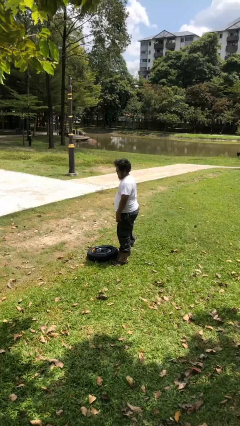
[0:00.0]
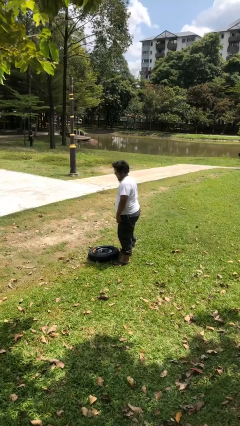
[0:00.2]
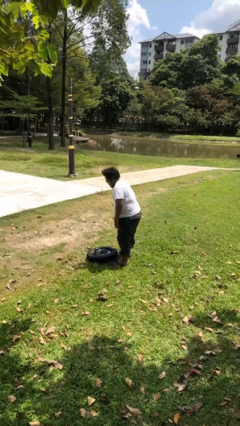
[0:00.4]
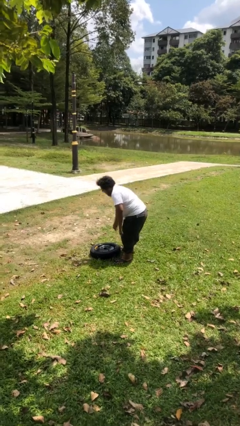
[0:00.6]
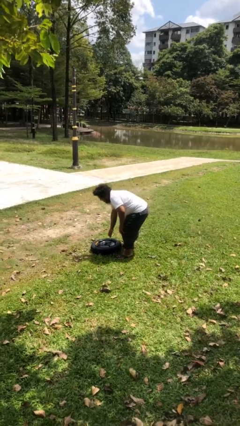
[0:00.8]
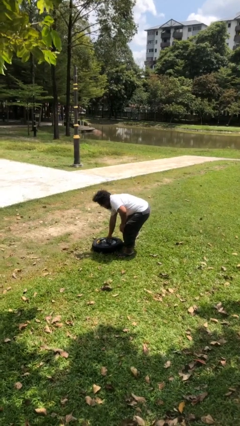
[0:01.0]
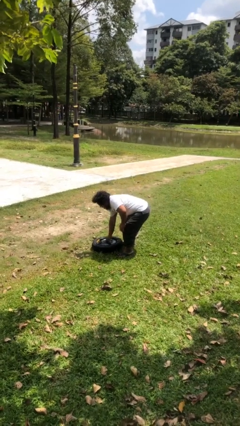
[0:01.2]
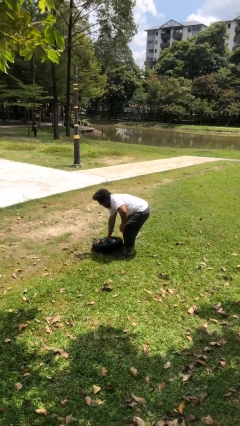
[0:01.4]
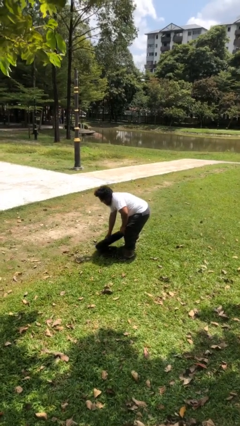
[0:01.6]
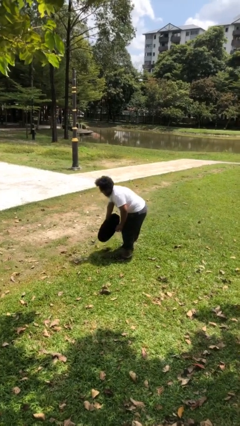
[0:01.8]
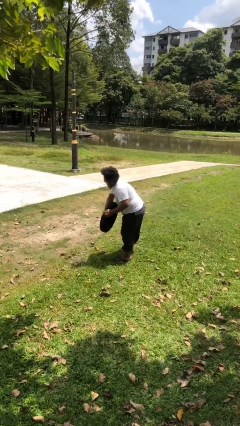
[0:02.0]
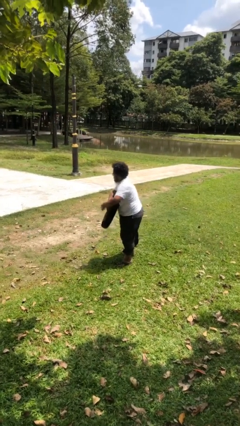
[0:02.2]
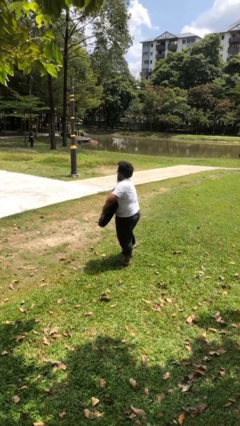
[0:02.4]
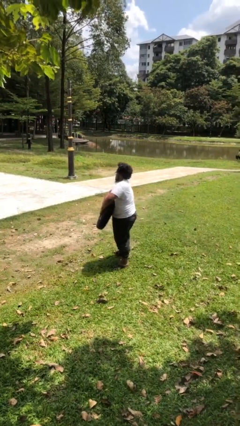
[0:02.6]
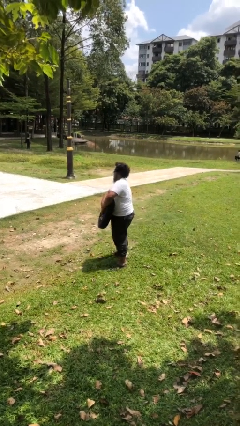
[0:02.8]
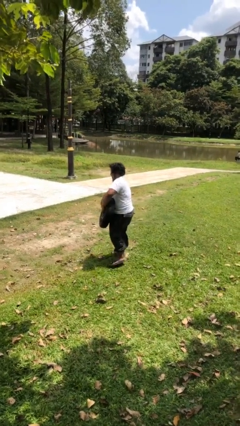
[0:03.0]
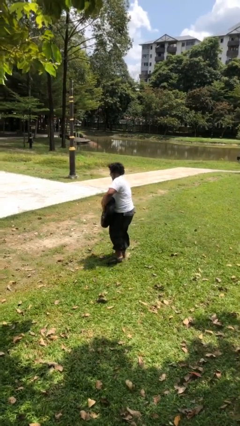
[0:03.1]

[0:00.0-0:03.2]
person picks up object from floor

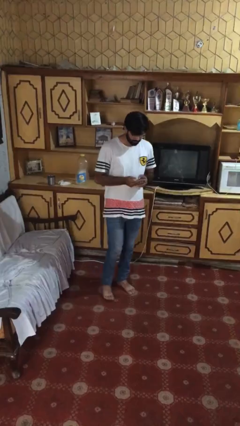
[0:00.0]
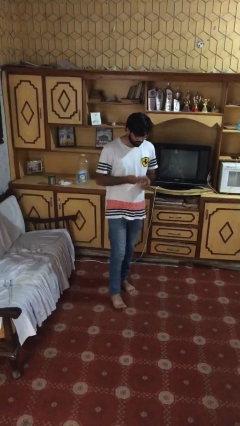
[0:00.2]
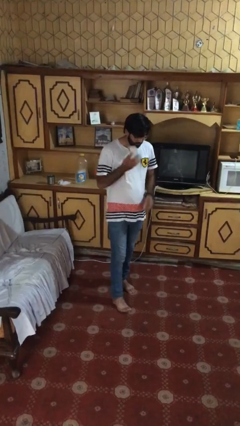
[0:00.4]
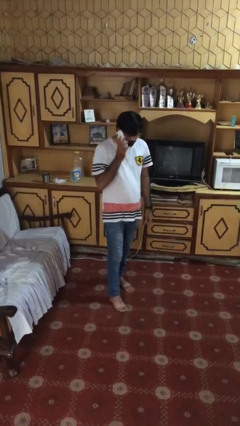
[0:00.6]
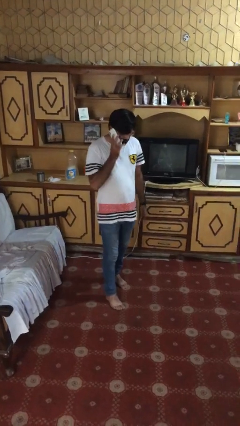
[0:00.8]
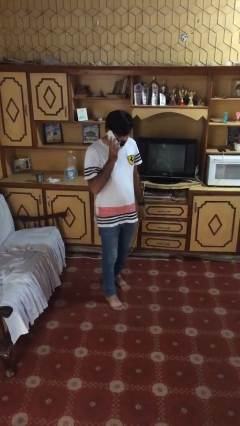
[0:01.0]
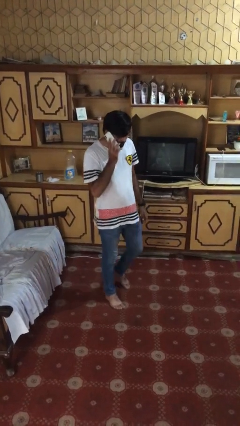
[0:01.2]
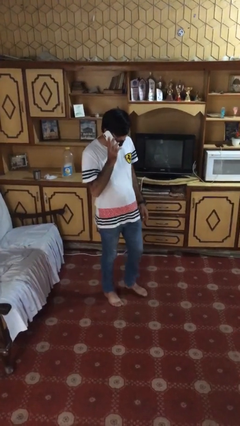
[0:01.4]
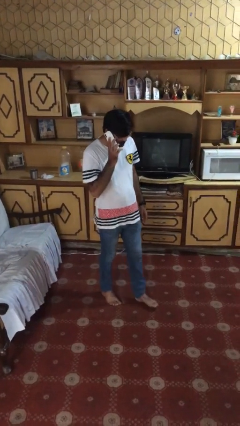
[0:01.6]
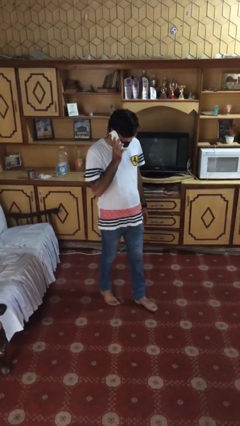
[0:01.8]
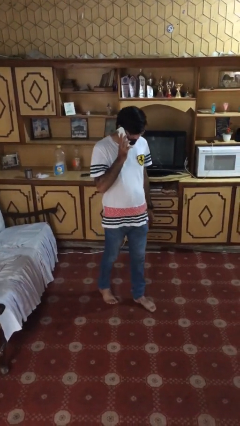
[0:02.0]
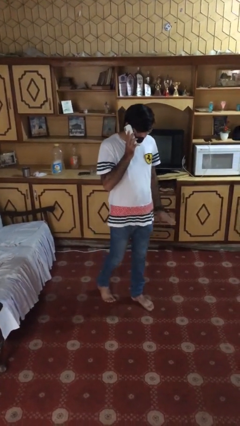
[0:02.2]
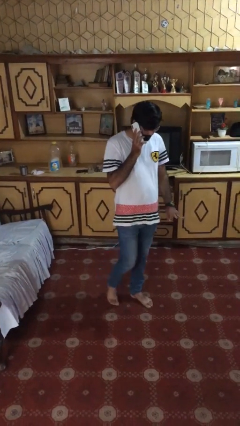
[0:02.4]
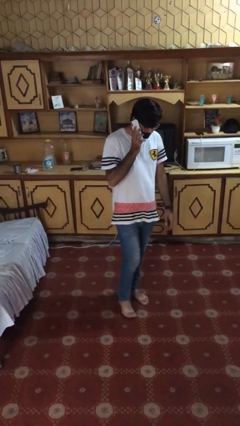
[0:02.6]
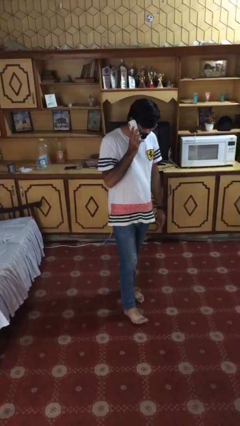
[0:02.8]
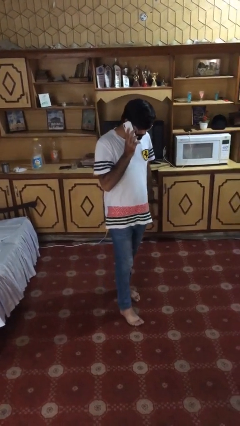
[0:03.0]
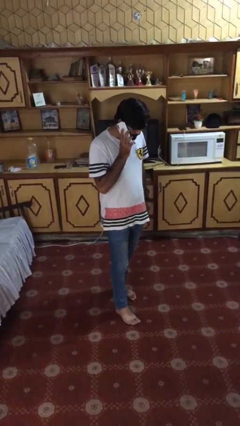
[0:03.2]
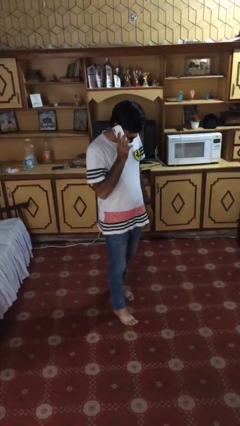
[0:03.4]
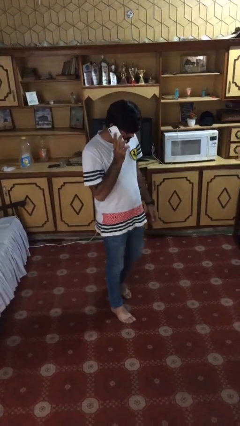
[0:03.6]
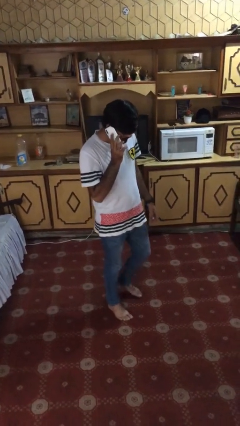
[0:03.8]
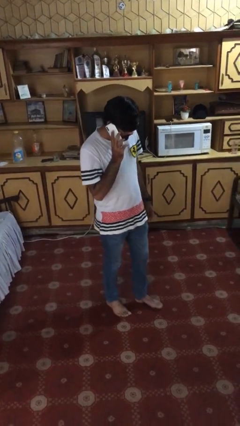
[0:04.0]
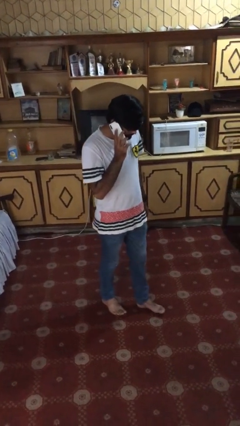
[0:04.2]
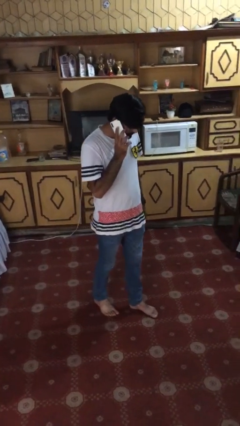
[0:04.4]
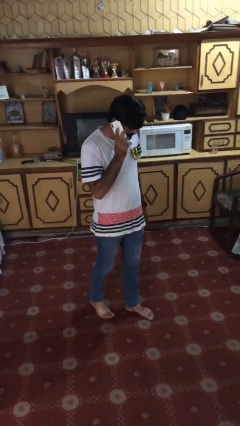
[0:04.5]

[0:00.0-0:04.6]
person talks on phone

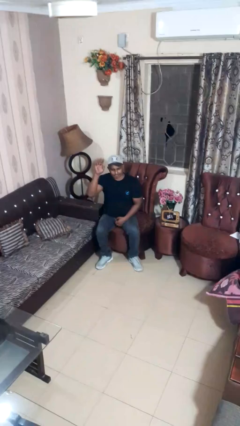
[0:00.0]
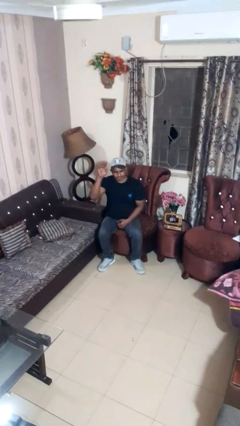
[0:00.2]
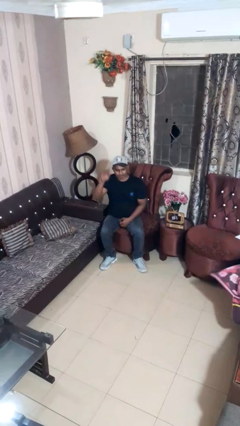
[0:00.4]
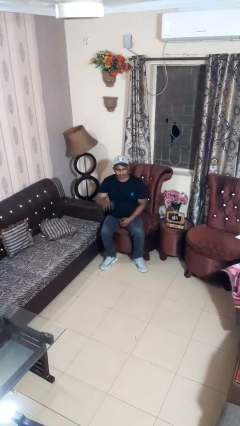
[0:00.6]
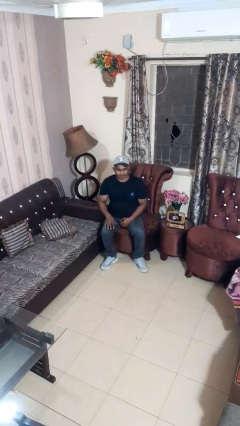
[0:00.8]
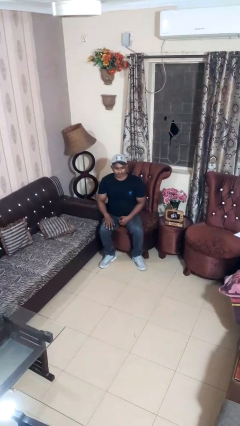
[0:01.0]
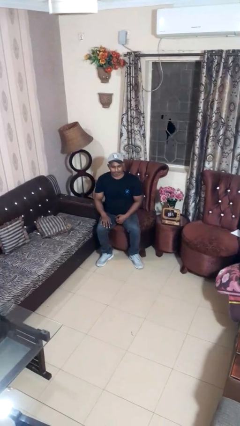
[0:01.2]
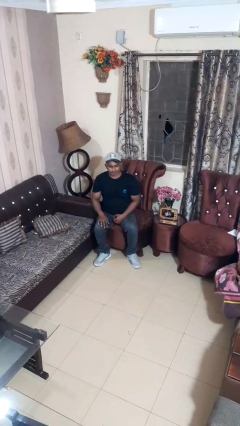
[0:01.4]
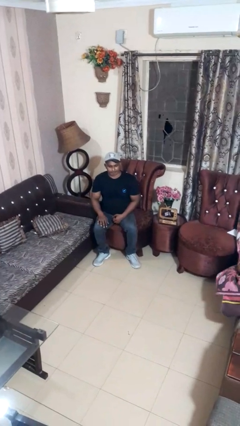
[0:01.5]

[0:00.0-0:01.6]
person gestures lower hand

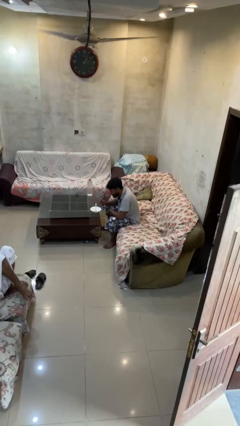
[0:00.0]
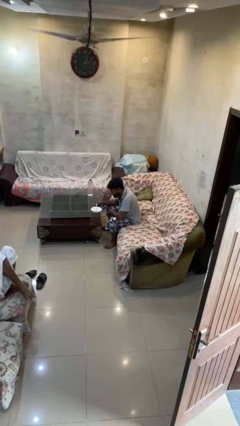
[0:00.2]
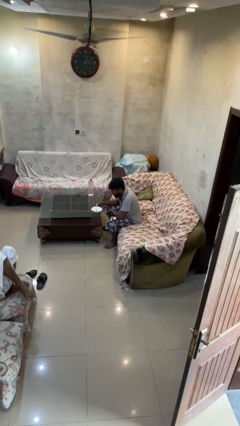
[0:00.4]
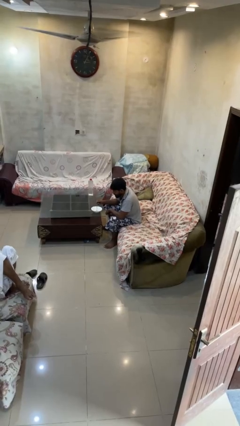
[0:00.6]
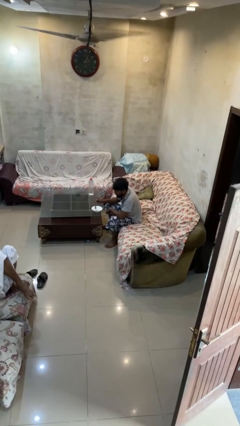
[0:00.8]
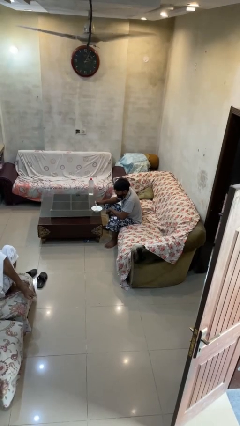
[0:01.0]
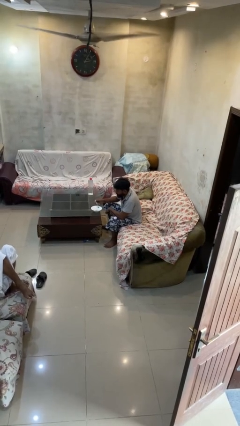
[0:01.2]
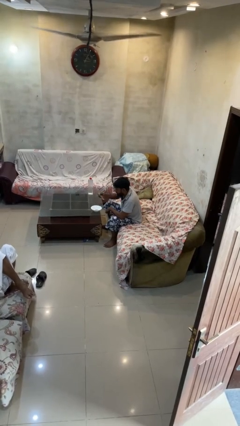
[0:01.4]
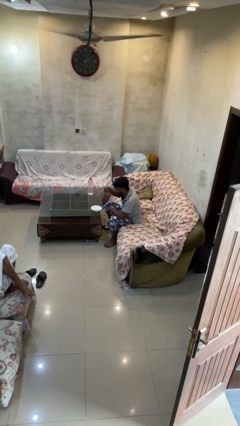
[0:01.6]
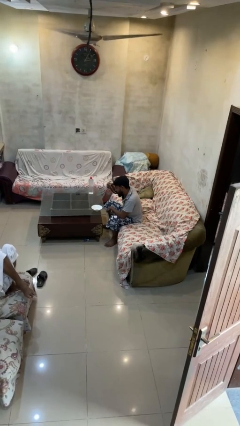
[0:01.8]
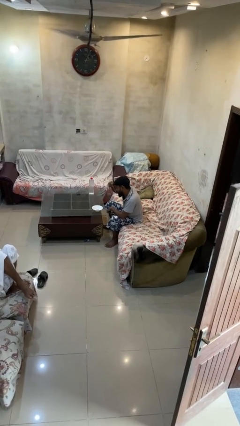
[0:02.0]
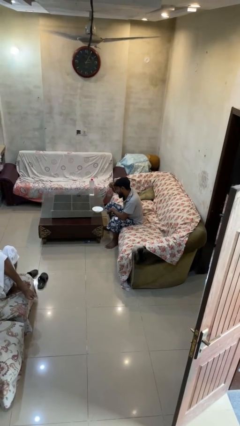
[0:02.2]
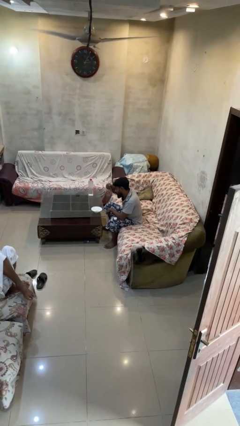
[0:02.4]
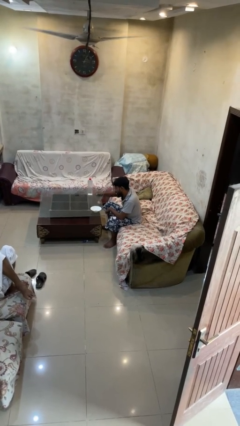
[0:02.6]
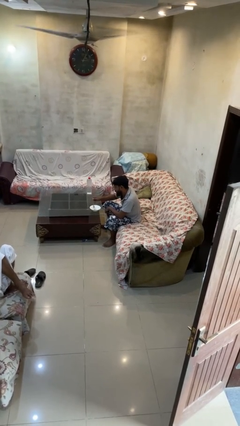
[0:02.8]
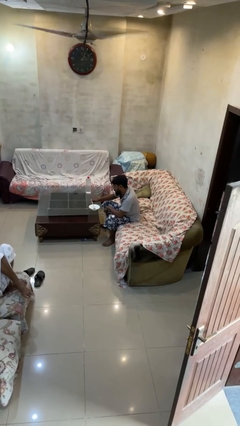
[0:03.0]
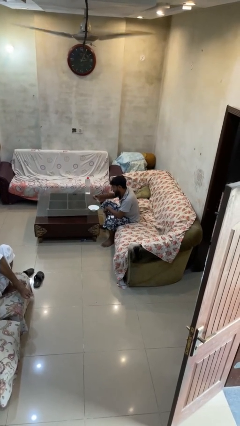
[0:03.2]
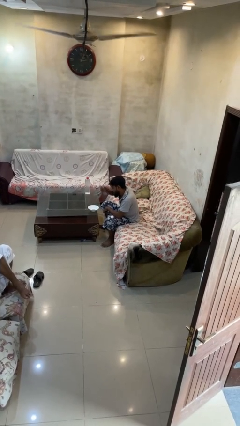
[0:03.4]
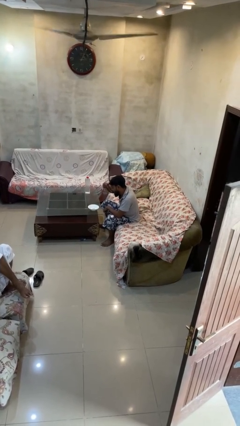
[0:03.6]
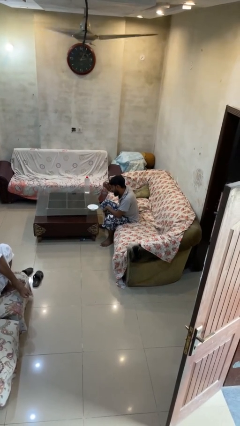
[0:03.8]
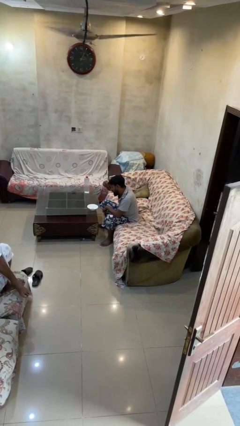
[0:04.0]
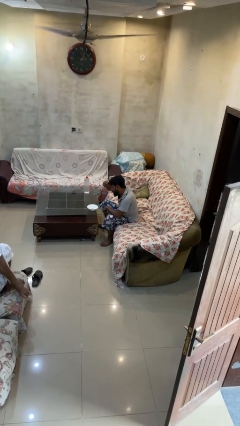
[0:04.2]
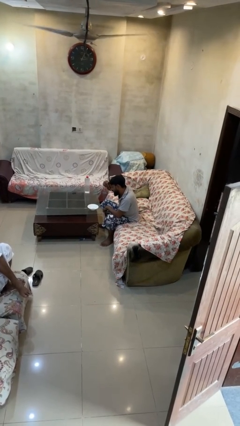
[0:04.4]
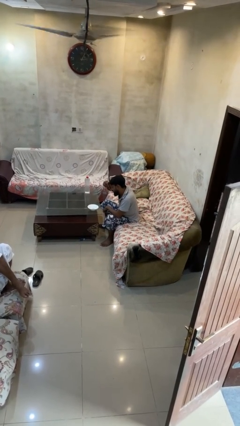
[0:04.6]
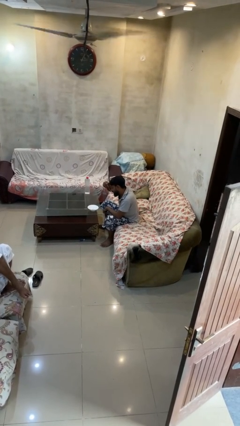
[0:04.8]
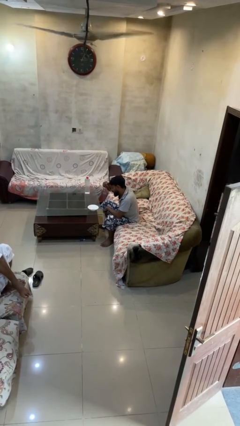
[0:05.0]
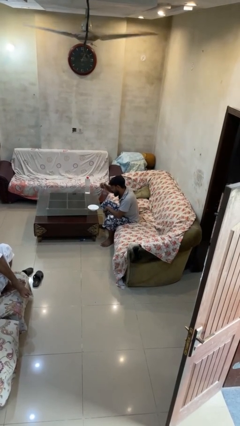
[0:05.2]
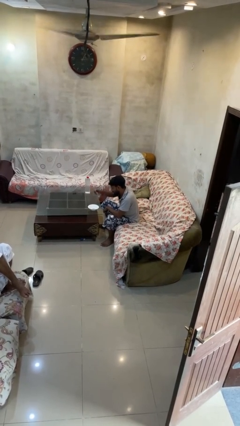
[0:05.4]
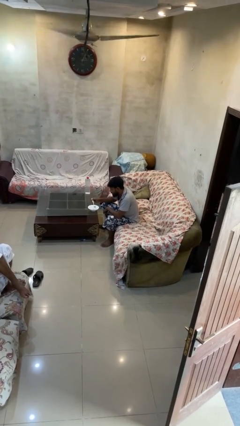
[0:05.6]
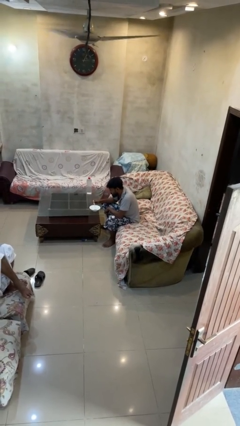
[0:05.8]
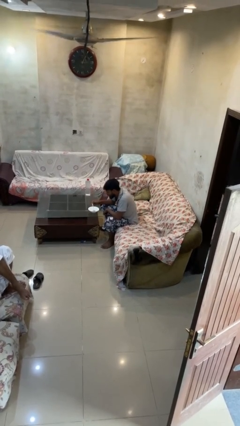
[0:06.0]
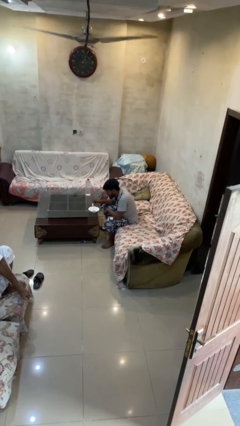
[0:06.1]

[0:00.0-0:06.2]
person eats with utensil

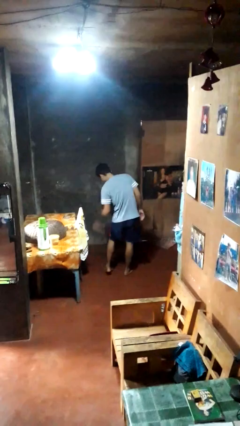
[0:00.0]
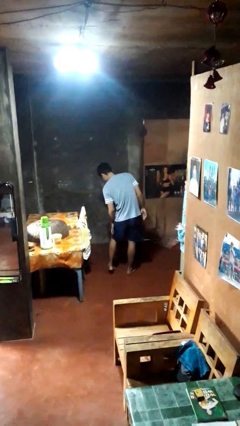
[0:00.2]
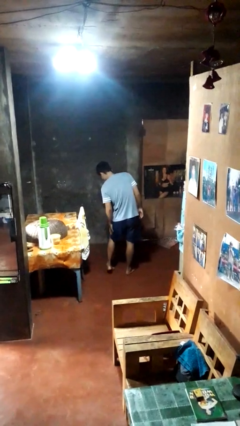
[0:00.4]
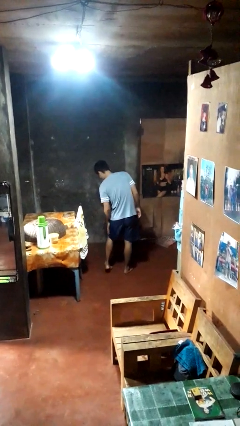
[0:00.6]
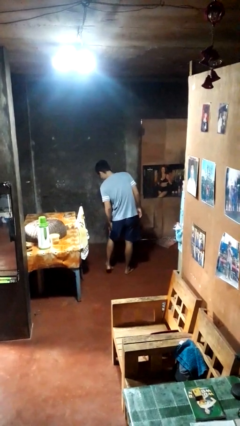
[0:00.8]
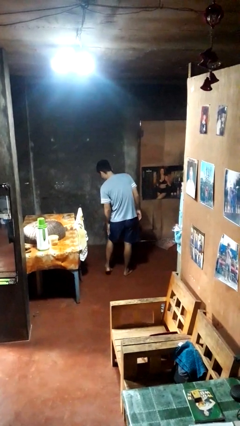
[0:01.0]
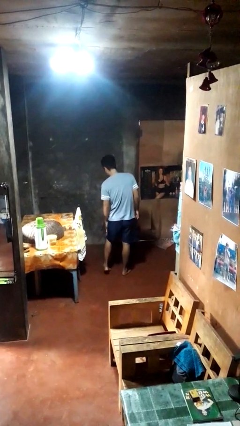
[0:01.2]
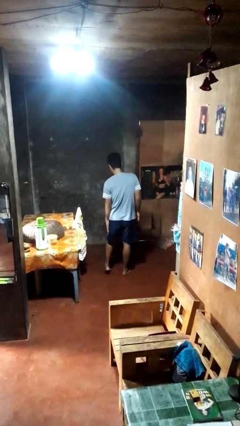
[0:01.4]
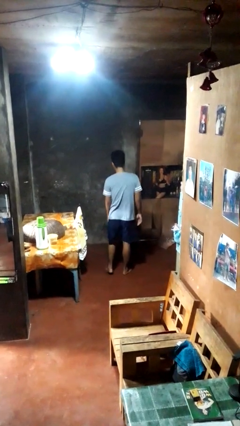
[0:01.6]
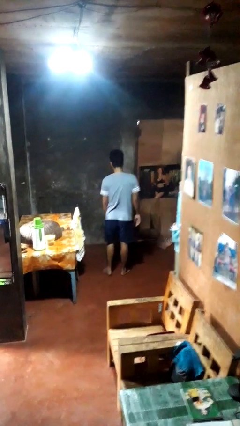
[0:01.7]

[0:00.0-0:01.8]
person swats bug

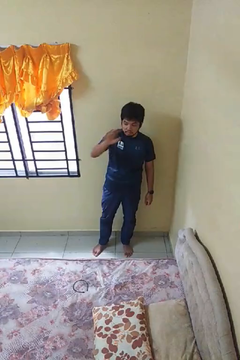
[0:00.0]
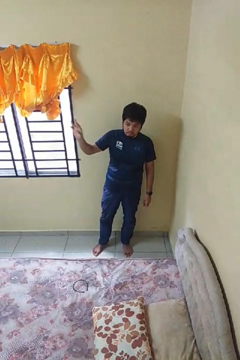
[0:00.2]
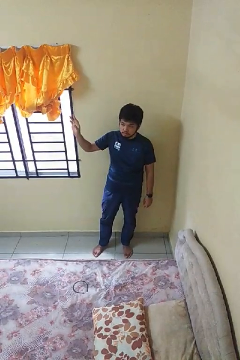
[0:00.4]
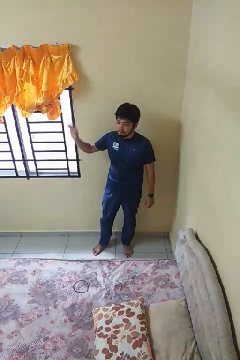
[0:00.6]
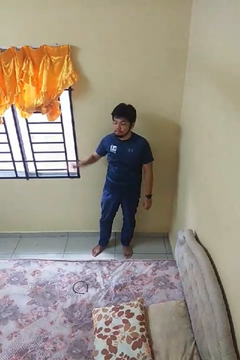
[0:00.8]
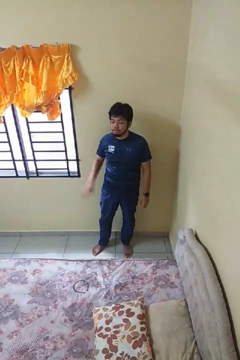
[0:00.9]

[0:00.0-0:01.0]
person gestures swipe right
